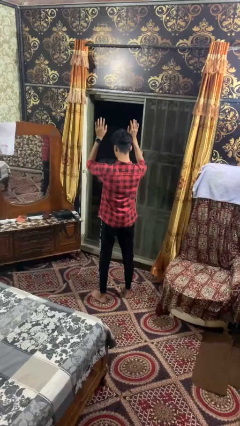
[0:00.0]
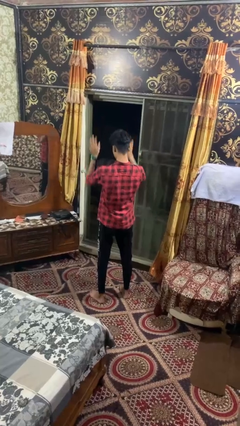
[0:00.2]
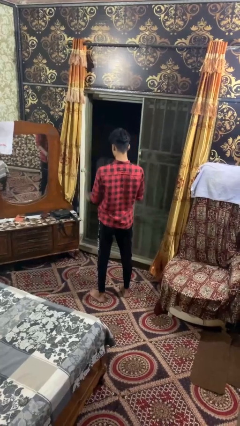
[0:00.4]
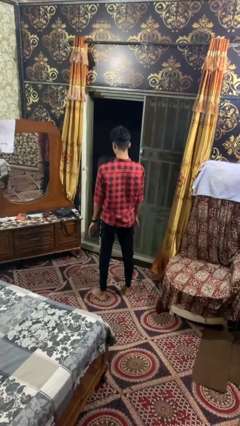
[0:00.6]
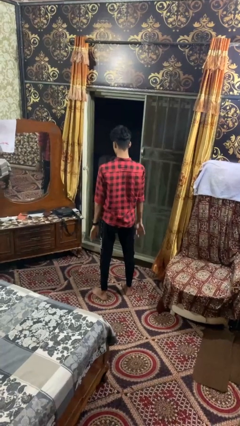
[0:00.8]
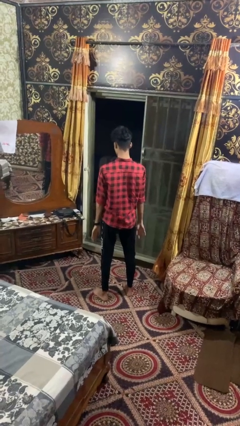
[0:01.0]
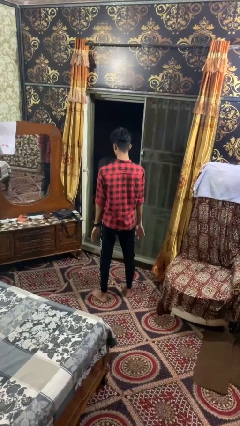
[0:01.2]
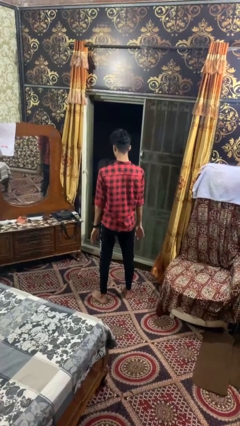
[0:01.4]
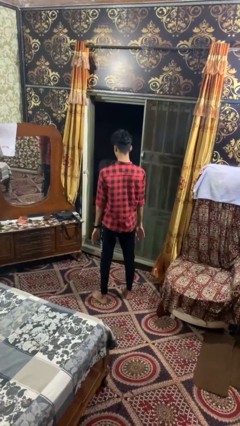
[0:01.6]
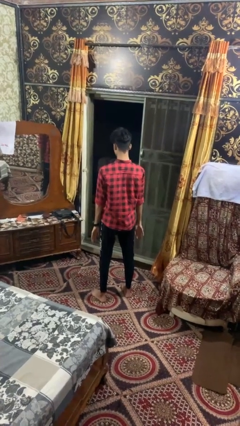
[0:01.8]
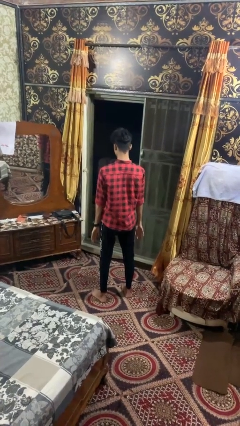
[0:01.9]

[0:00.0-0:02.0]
person gestures swipe down

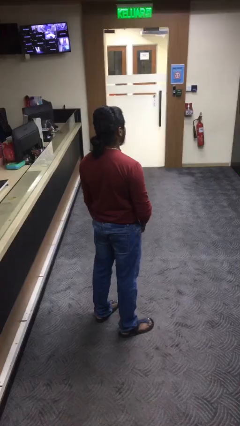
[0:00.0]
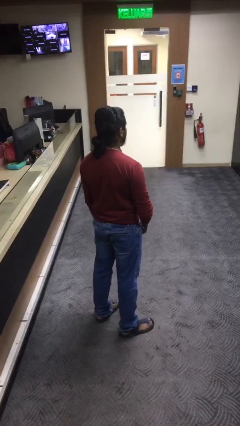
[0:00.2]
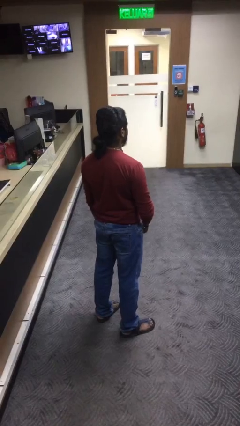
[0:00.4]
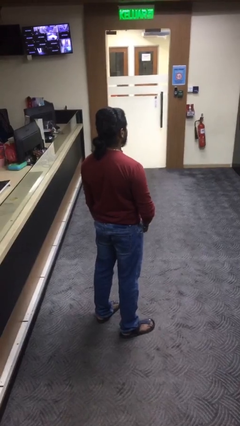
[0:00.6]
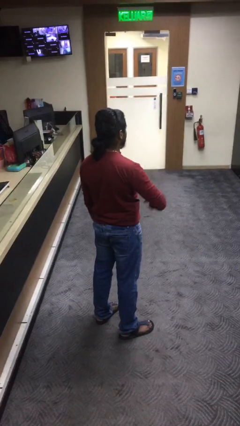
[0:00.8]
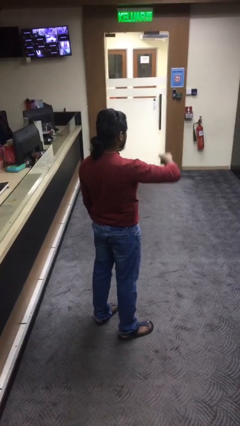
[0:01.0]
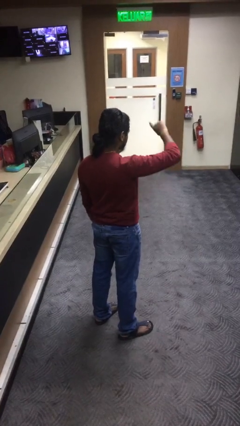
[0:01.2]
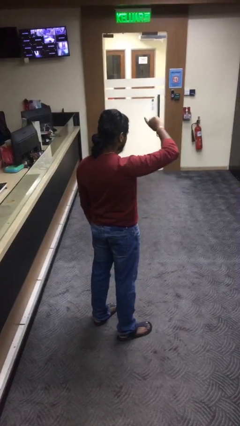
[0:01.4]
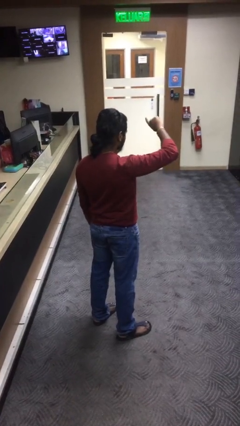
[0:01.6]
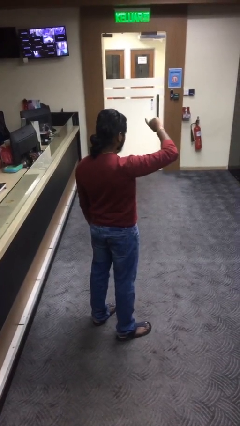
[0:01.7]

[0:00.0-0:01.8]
person gestures swipe up

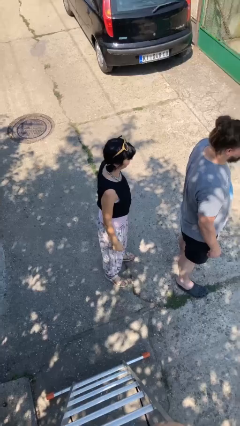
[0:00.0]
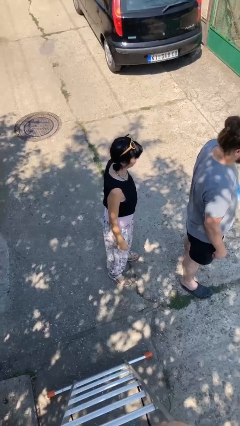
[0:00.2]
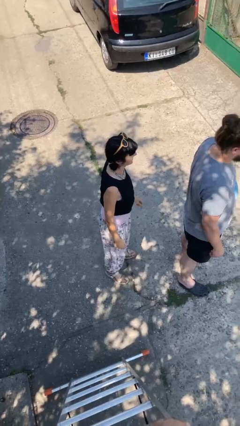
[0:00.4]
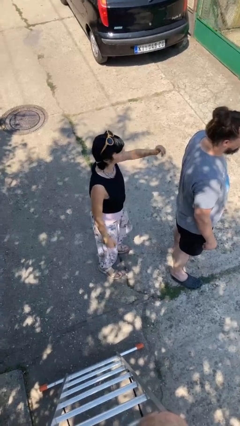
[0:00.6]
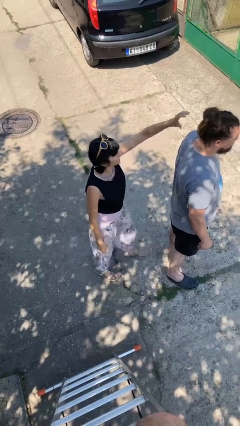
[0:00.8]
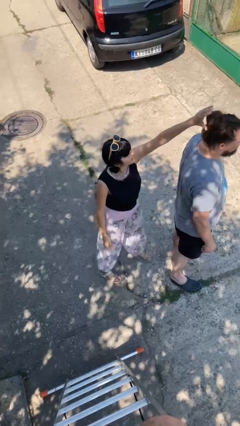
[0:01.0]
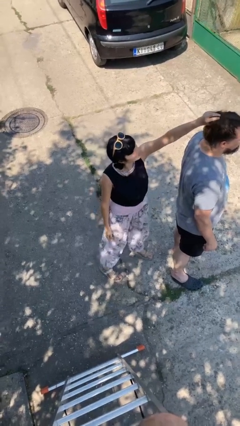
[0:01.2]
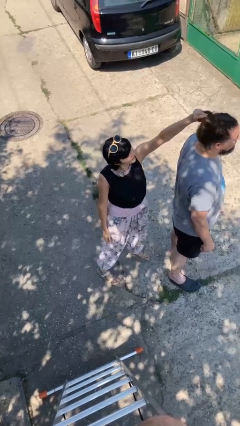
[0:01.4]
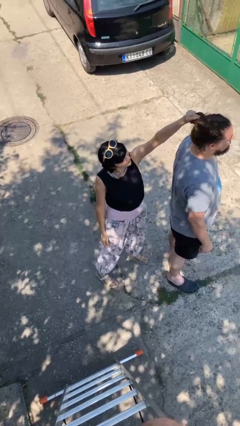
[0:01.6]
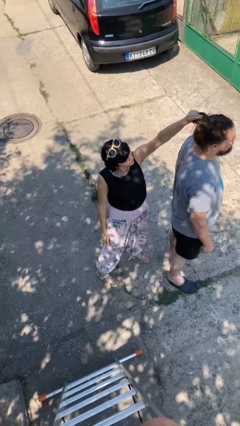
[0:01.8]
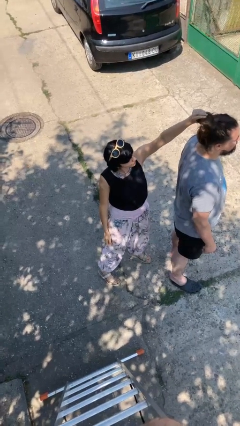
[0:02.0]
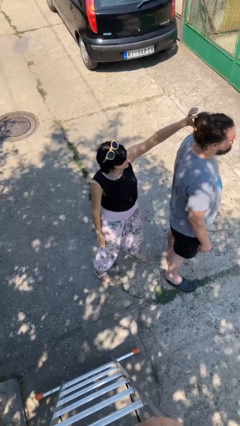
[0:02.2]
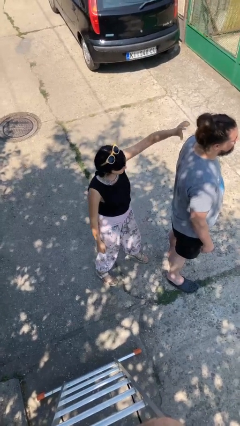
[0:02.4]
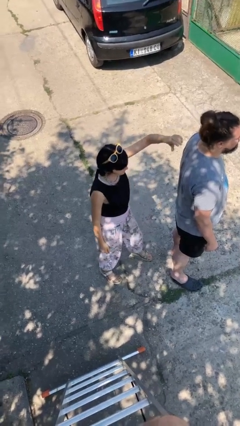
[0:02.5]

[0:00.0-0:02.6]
person grabs person by hair

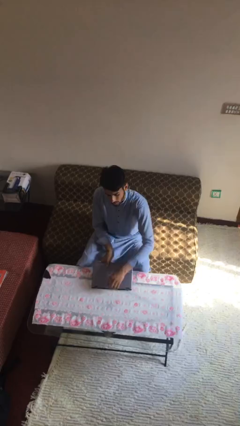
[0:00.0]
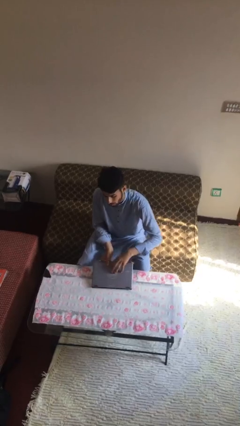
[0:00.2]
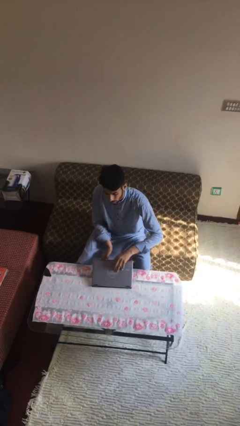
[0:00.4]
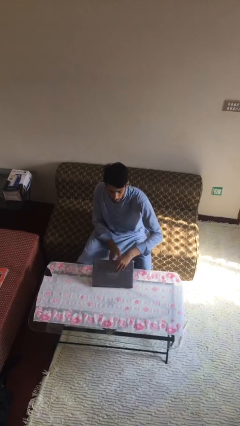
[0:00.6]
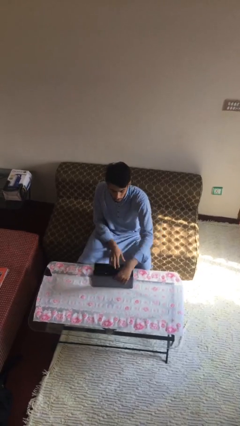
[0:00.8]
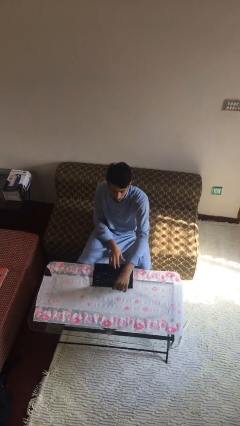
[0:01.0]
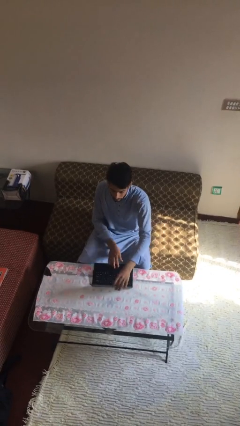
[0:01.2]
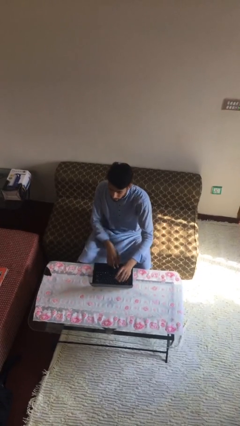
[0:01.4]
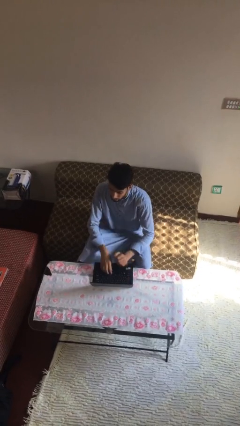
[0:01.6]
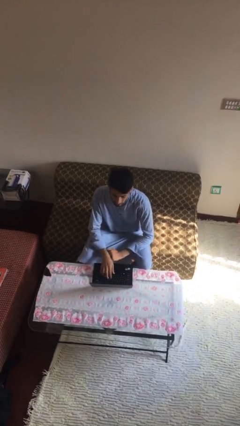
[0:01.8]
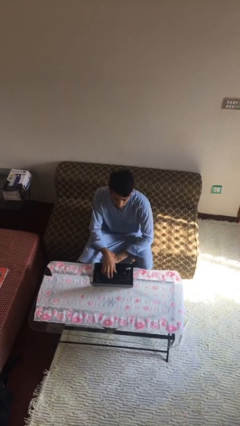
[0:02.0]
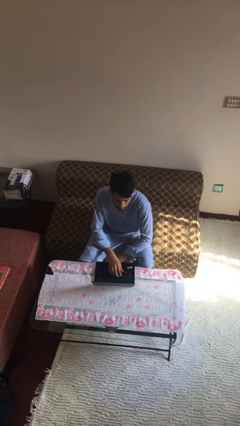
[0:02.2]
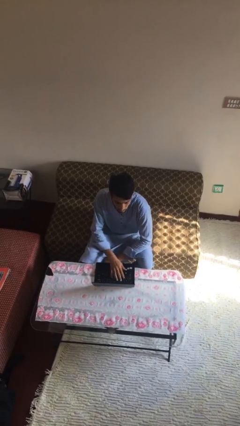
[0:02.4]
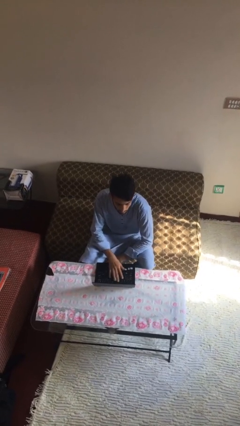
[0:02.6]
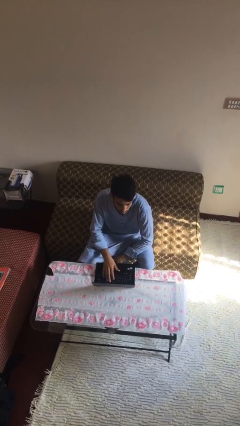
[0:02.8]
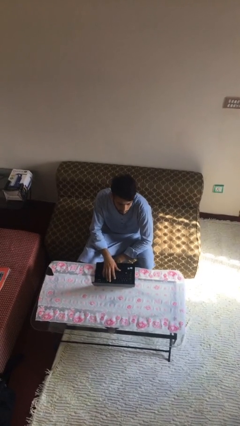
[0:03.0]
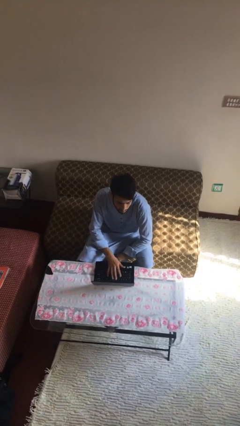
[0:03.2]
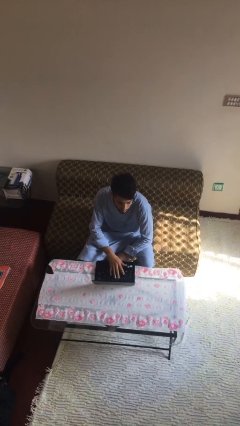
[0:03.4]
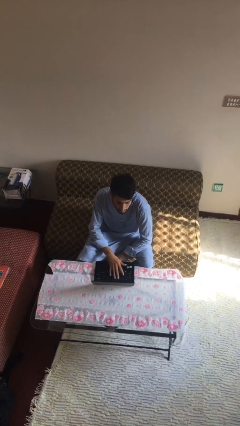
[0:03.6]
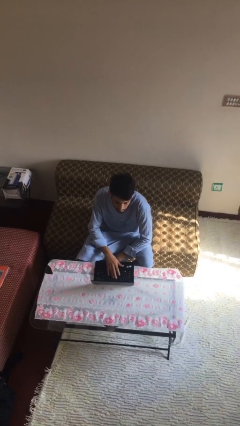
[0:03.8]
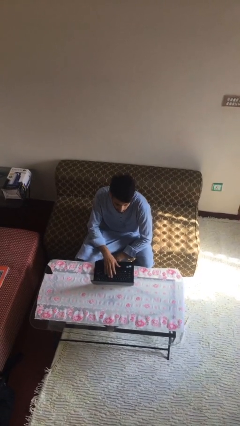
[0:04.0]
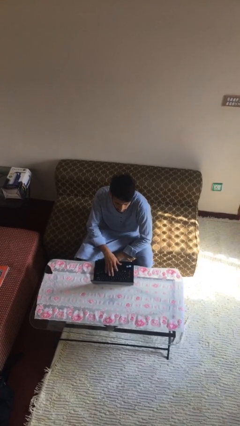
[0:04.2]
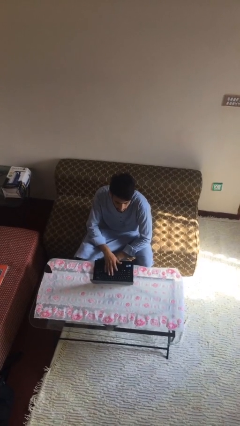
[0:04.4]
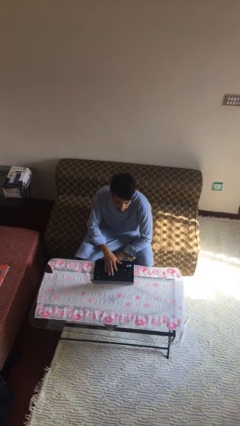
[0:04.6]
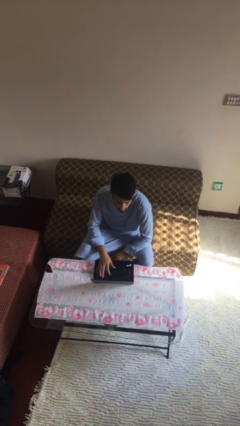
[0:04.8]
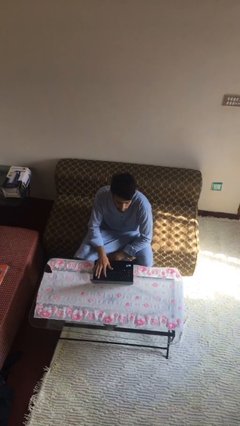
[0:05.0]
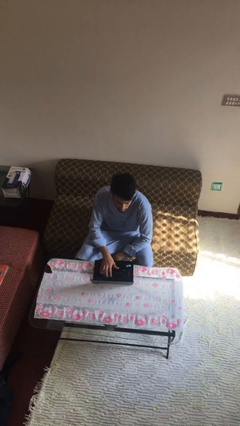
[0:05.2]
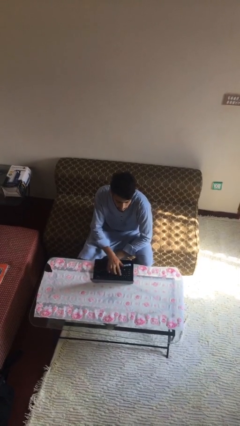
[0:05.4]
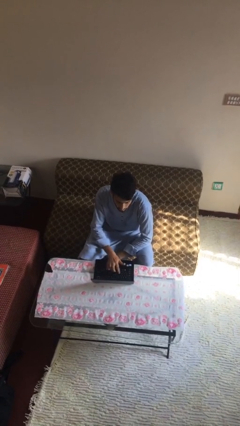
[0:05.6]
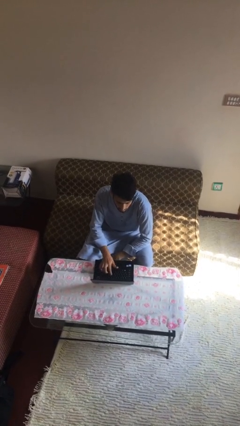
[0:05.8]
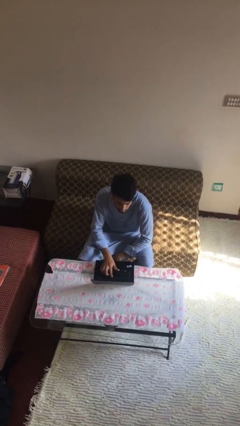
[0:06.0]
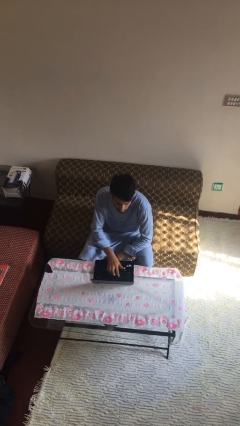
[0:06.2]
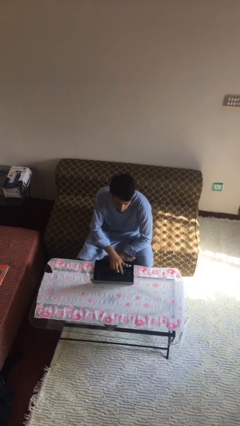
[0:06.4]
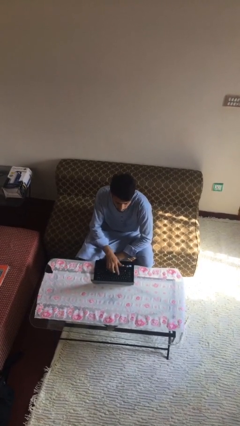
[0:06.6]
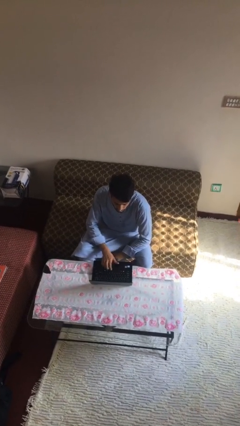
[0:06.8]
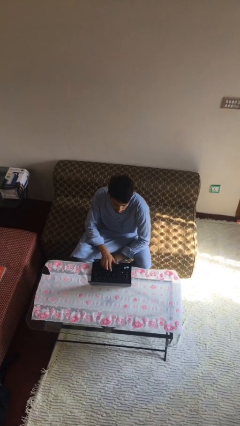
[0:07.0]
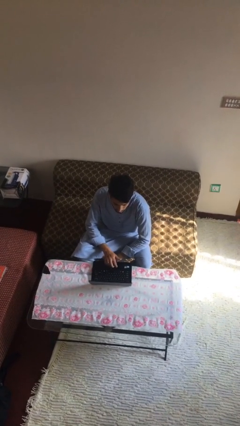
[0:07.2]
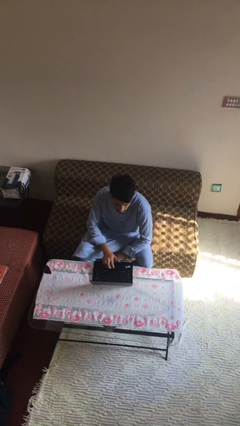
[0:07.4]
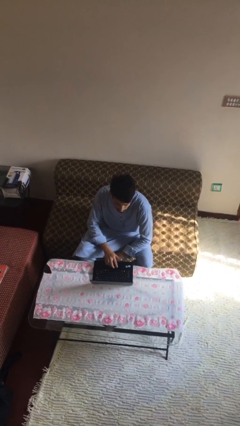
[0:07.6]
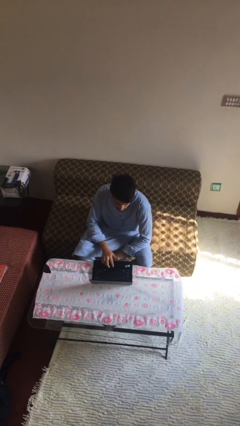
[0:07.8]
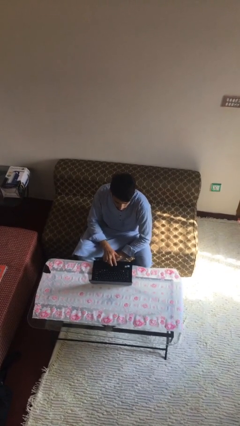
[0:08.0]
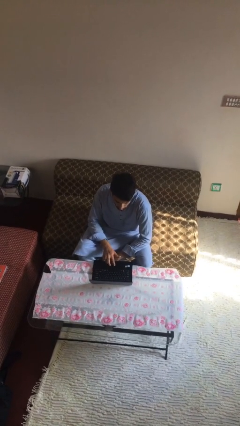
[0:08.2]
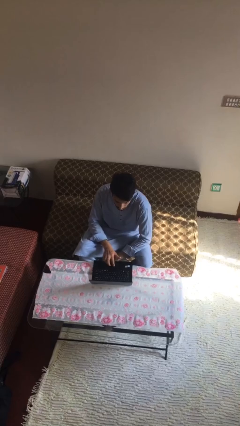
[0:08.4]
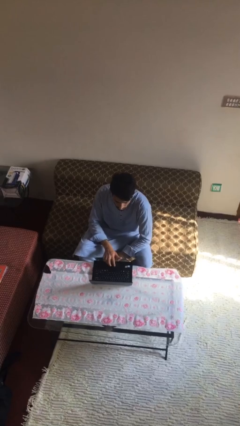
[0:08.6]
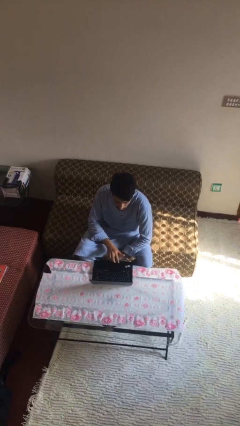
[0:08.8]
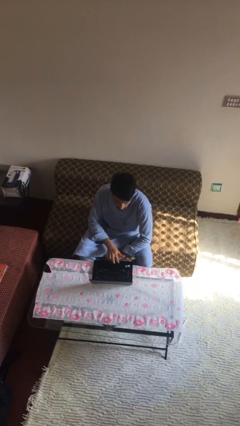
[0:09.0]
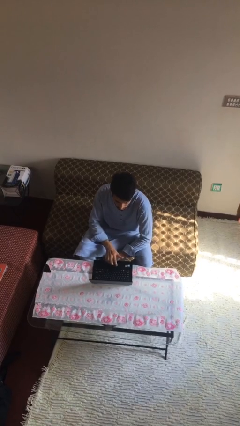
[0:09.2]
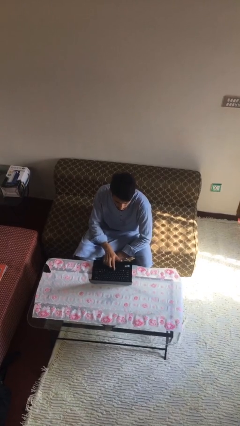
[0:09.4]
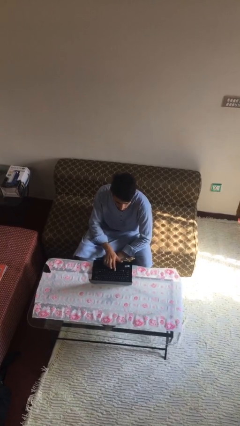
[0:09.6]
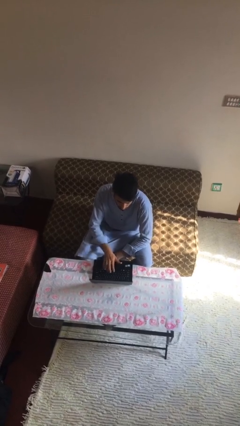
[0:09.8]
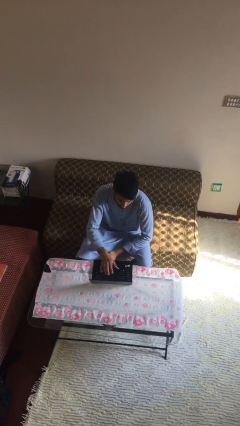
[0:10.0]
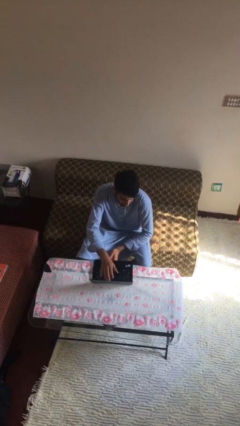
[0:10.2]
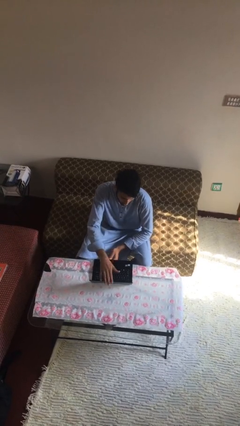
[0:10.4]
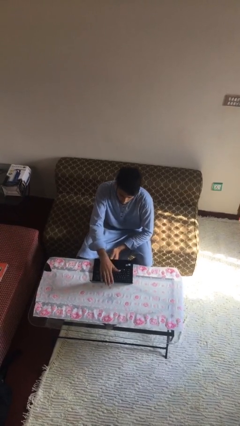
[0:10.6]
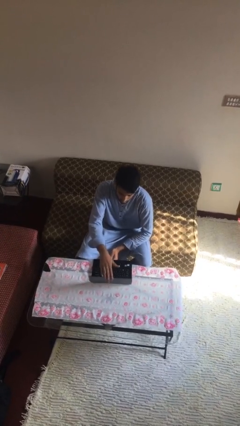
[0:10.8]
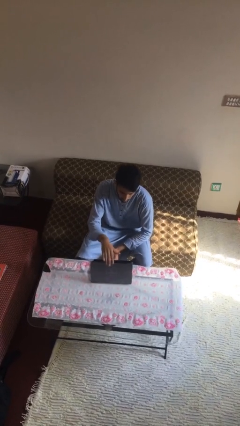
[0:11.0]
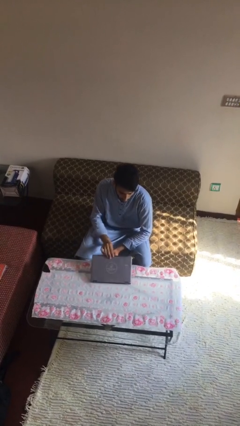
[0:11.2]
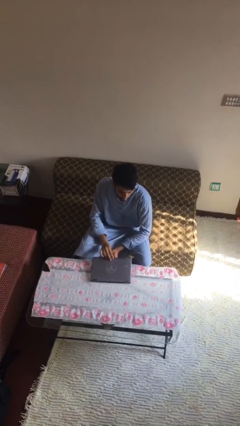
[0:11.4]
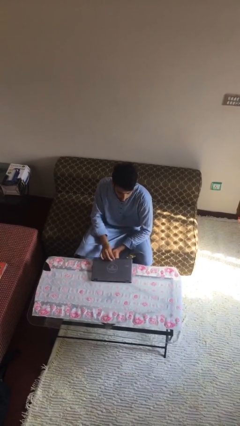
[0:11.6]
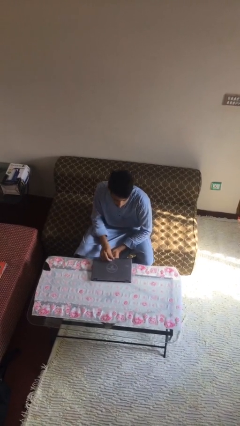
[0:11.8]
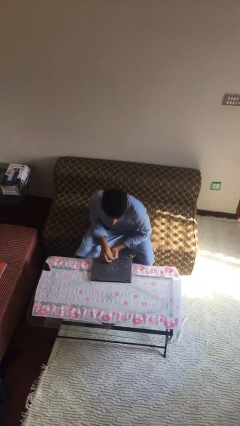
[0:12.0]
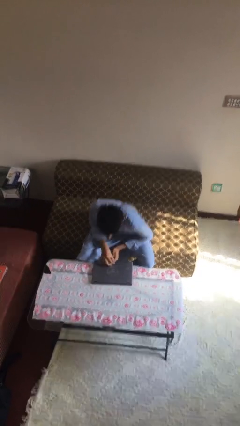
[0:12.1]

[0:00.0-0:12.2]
person interacts with laptop
